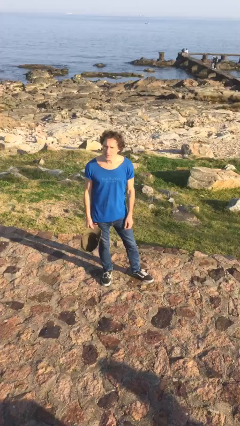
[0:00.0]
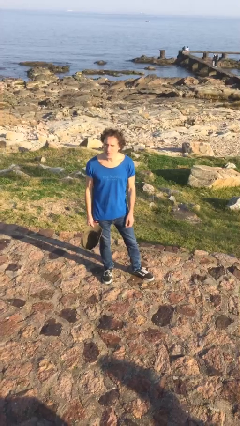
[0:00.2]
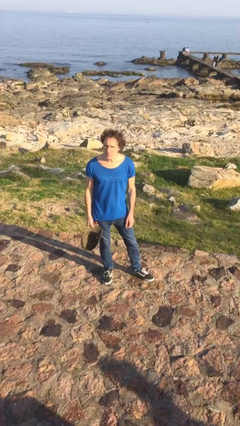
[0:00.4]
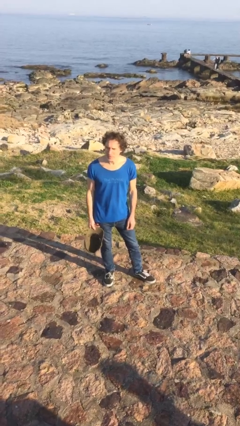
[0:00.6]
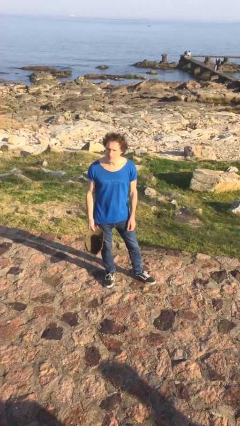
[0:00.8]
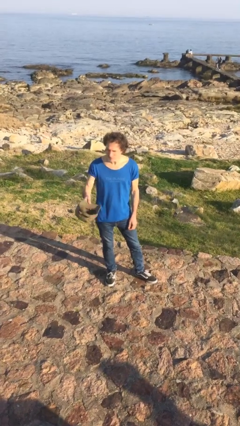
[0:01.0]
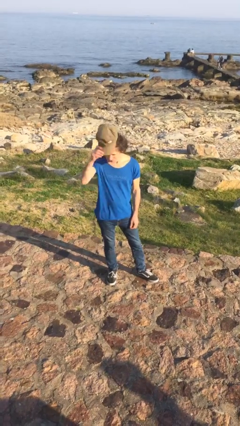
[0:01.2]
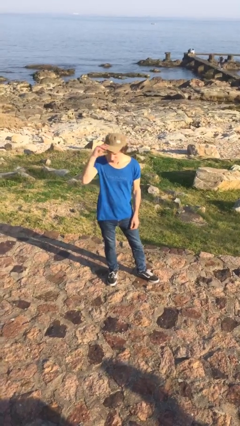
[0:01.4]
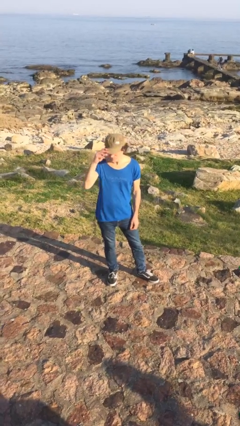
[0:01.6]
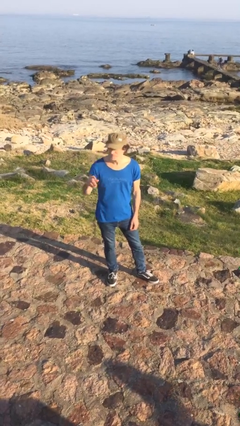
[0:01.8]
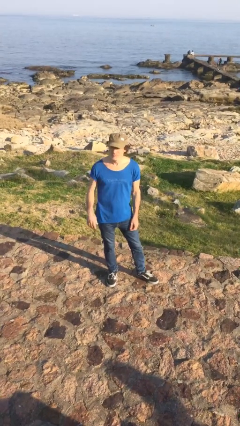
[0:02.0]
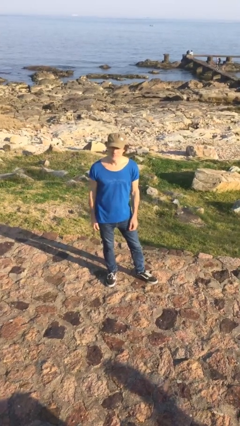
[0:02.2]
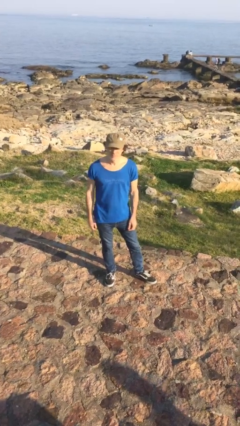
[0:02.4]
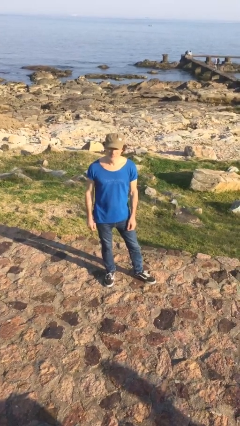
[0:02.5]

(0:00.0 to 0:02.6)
person puts on hat

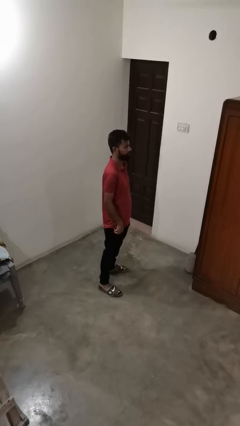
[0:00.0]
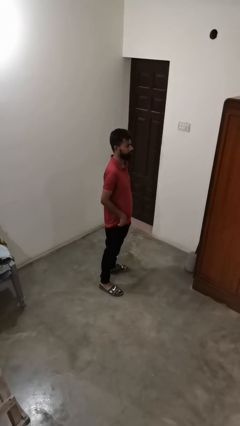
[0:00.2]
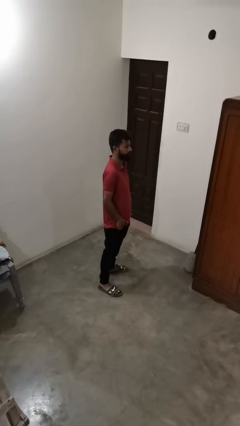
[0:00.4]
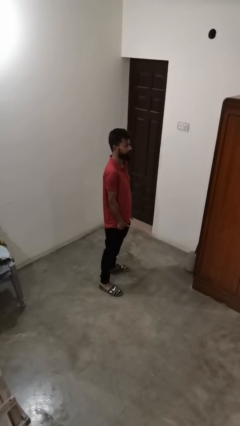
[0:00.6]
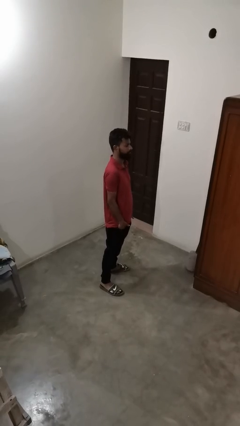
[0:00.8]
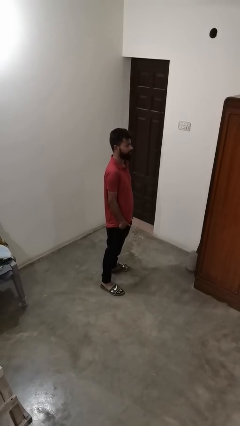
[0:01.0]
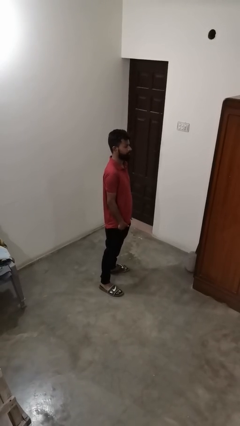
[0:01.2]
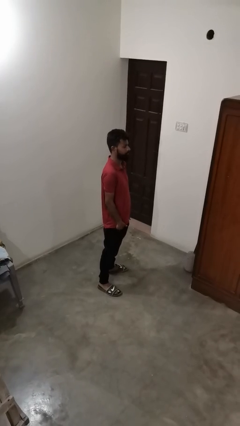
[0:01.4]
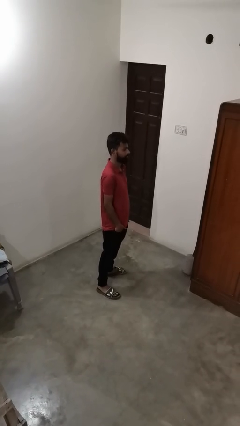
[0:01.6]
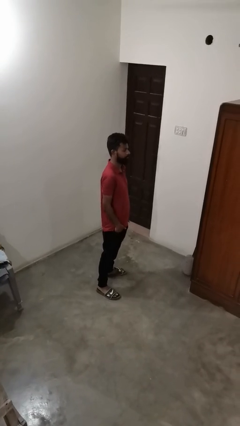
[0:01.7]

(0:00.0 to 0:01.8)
person puts hands in back pockets

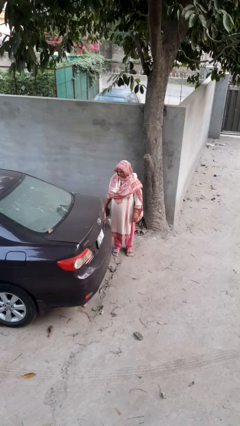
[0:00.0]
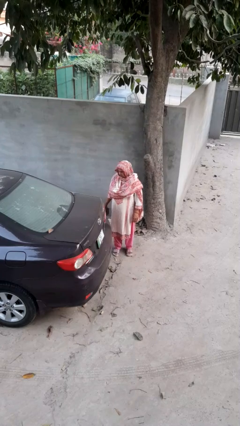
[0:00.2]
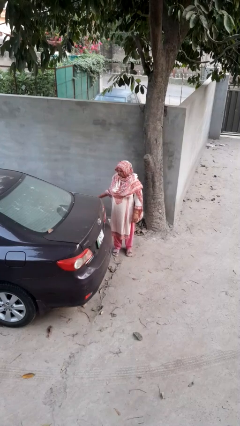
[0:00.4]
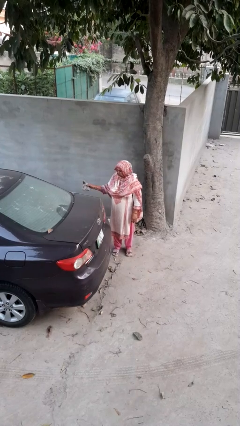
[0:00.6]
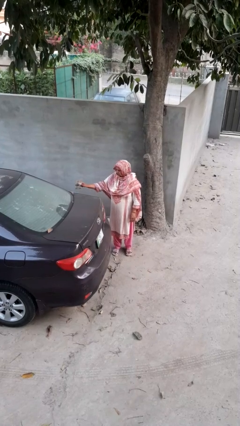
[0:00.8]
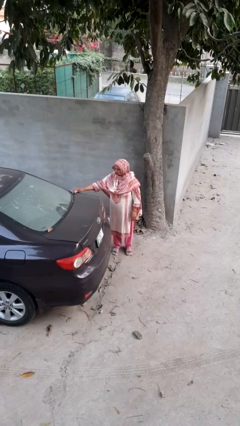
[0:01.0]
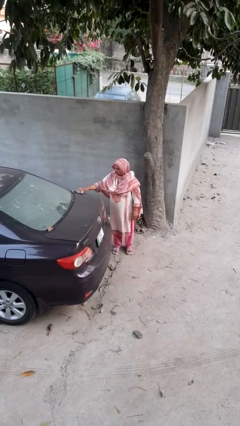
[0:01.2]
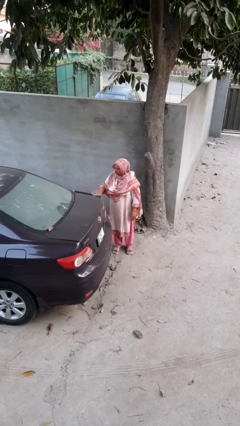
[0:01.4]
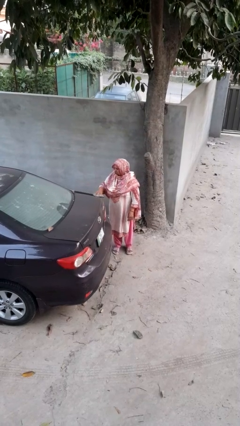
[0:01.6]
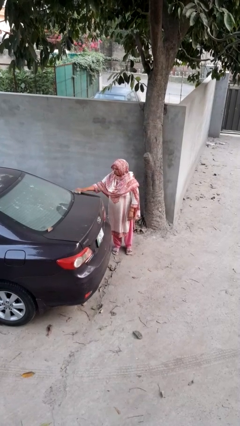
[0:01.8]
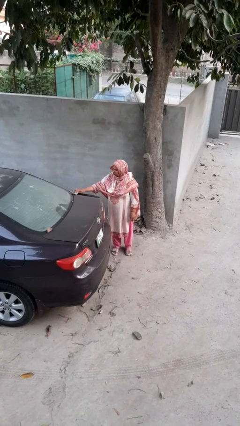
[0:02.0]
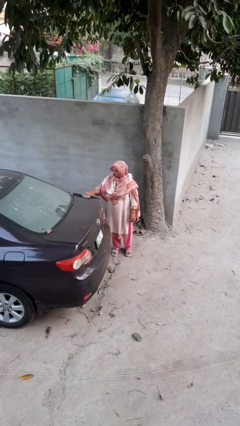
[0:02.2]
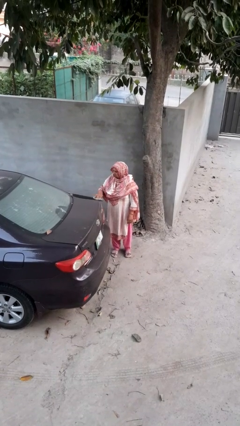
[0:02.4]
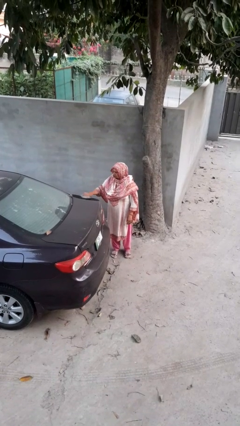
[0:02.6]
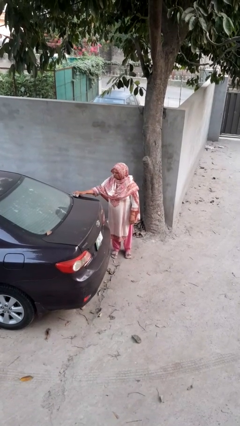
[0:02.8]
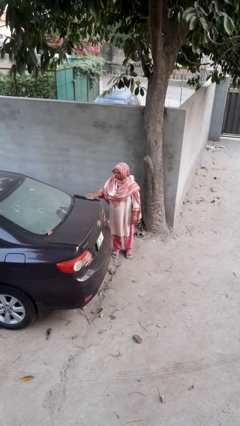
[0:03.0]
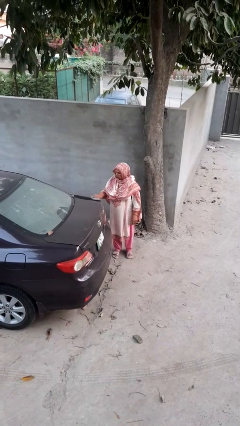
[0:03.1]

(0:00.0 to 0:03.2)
person polishes car with rag

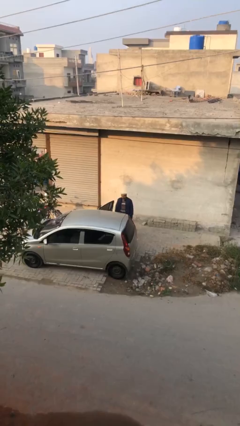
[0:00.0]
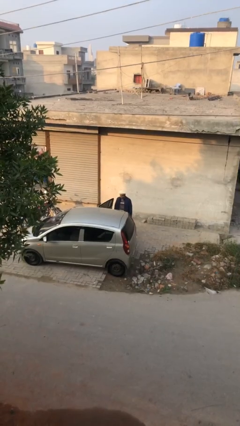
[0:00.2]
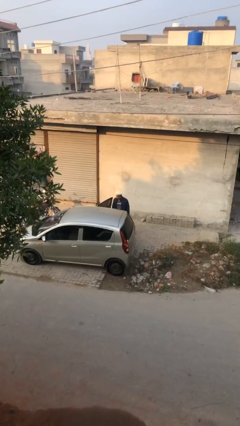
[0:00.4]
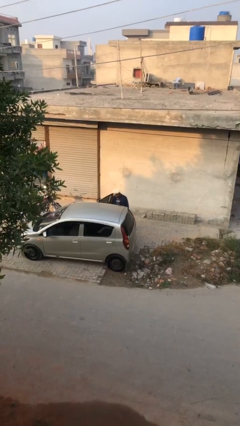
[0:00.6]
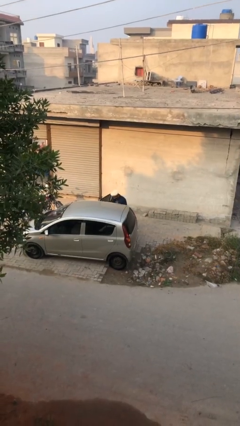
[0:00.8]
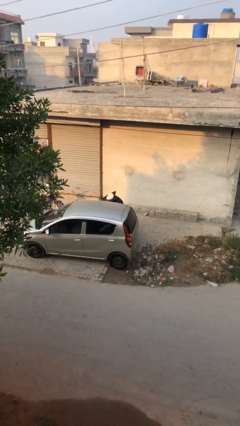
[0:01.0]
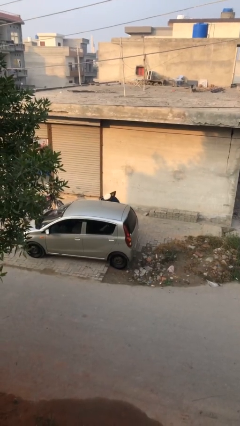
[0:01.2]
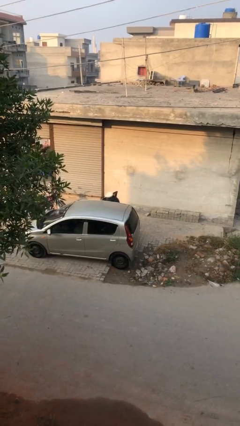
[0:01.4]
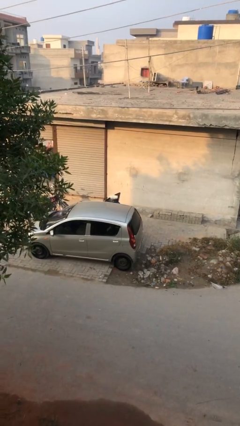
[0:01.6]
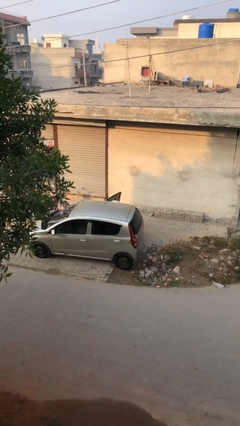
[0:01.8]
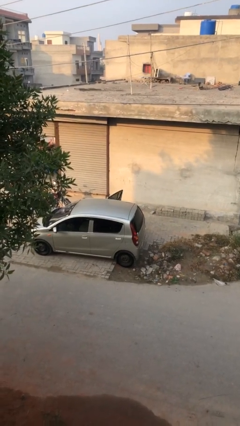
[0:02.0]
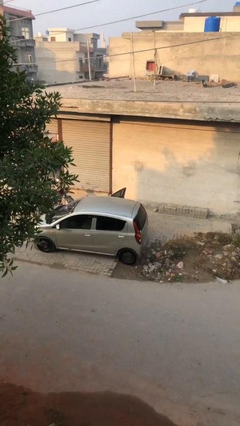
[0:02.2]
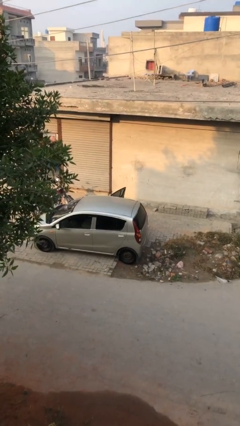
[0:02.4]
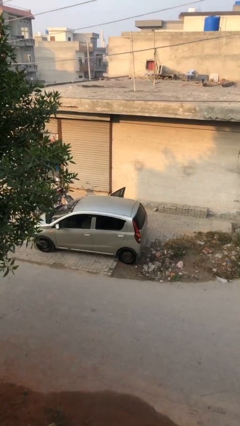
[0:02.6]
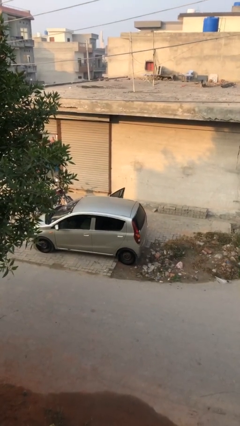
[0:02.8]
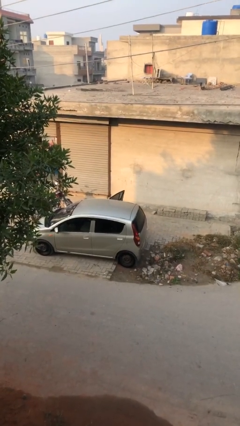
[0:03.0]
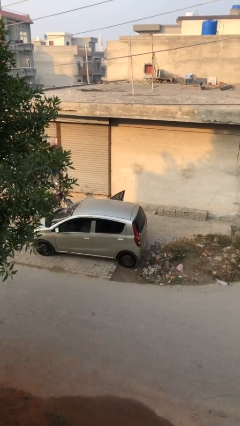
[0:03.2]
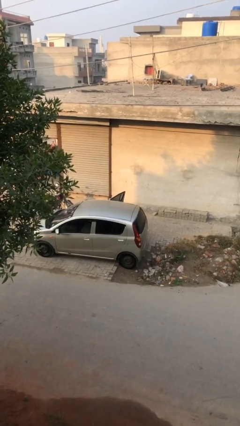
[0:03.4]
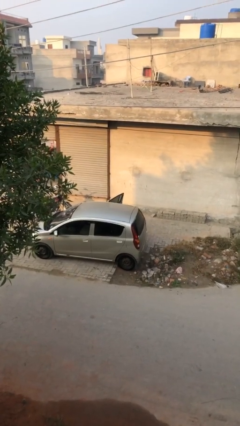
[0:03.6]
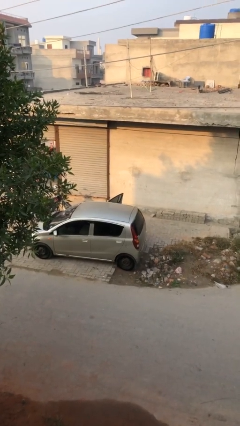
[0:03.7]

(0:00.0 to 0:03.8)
person enters car

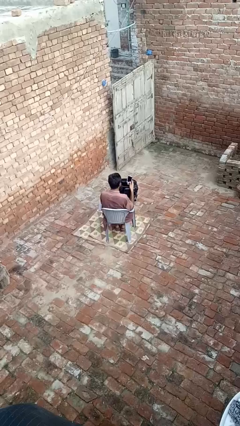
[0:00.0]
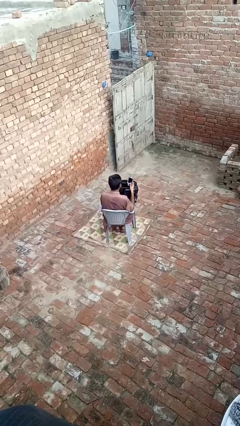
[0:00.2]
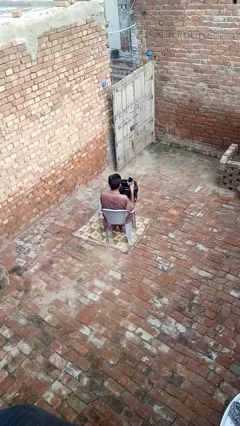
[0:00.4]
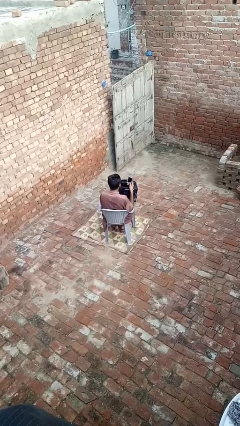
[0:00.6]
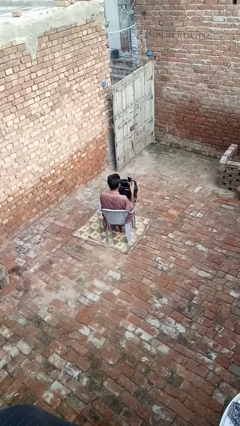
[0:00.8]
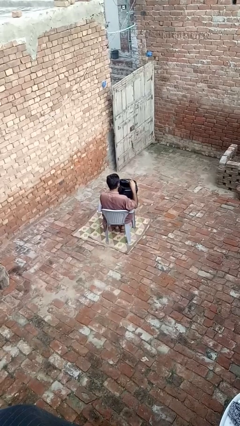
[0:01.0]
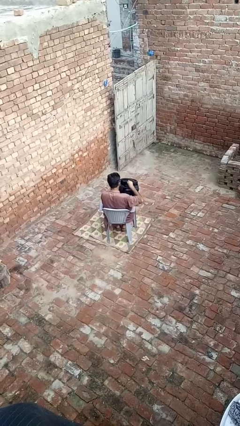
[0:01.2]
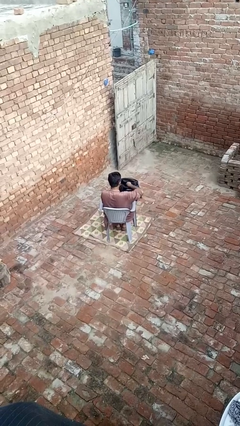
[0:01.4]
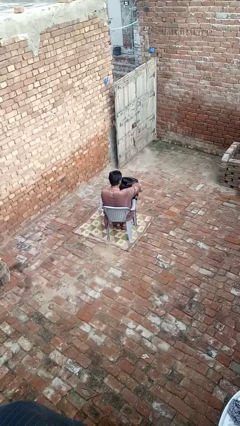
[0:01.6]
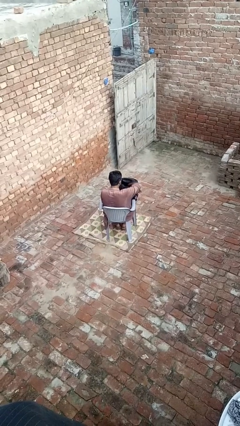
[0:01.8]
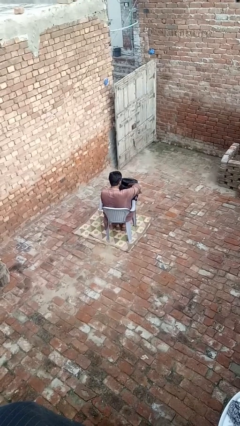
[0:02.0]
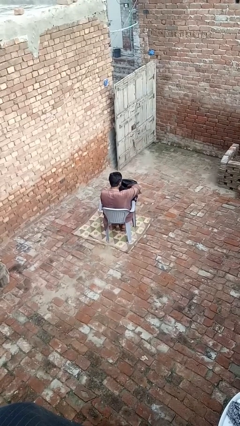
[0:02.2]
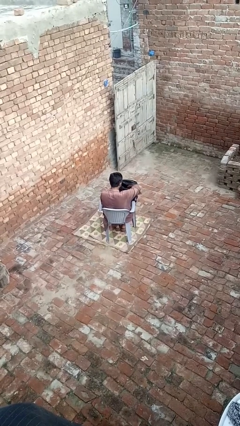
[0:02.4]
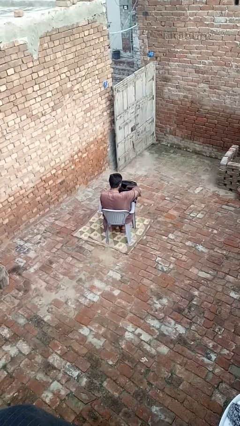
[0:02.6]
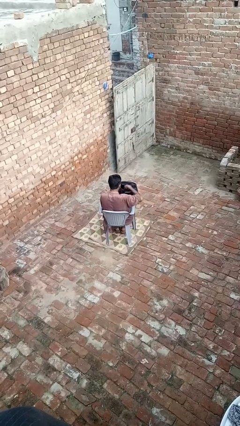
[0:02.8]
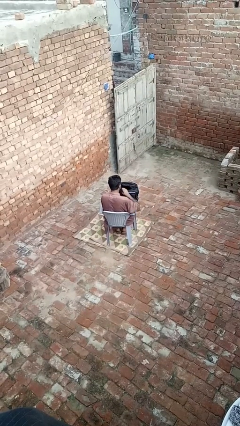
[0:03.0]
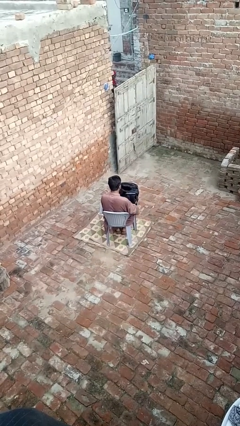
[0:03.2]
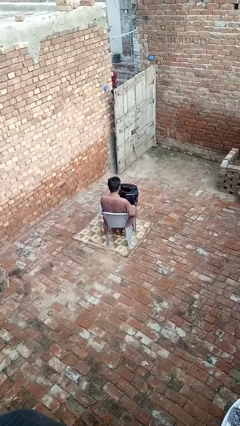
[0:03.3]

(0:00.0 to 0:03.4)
person puts object into backpack

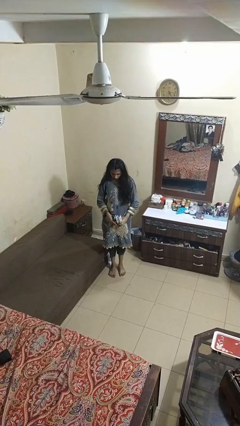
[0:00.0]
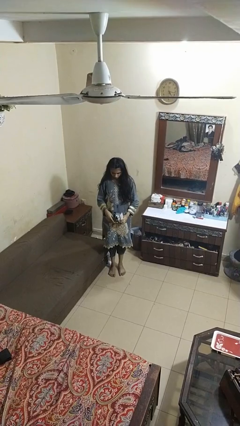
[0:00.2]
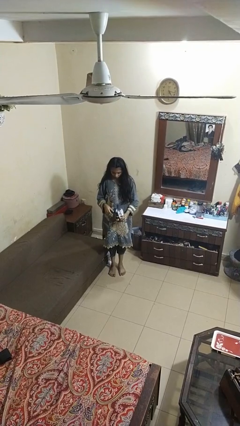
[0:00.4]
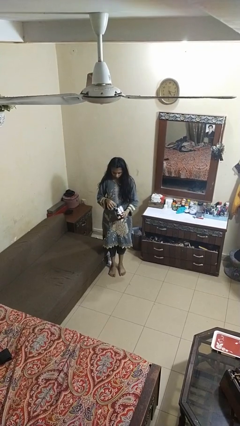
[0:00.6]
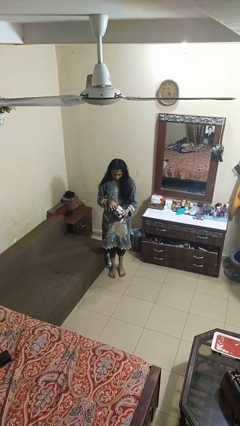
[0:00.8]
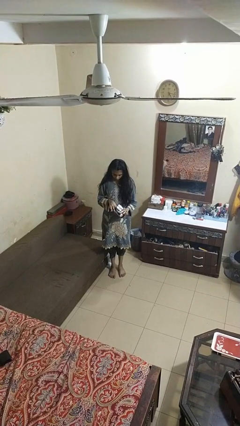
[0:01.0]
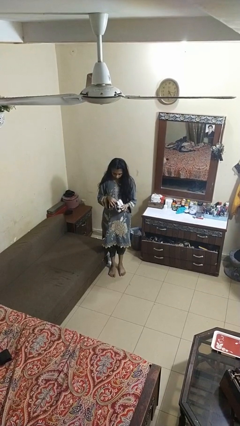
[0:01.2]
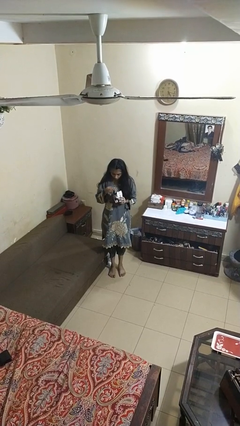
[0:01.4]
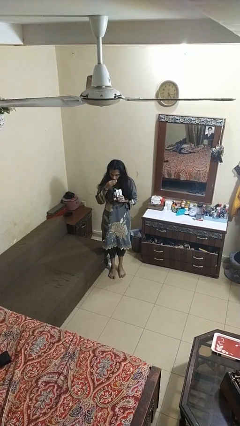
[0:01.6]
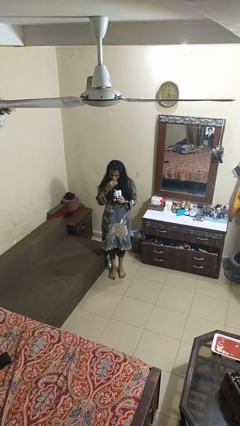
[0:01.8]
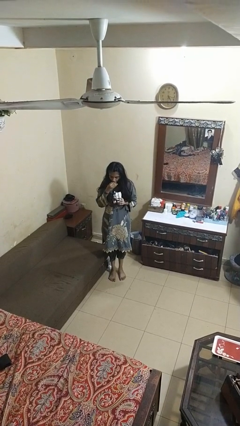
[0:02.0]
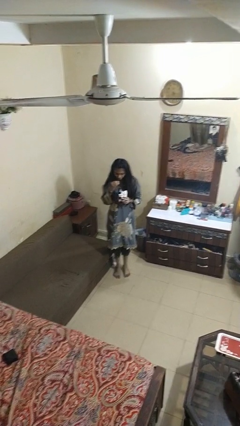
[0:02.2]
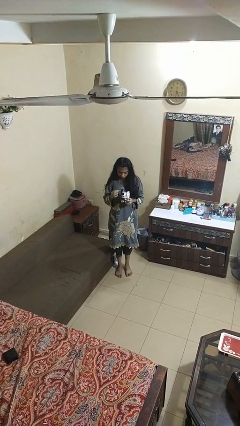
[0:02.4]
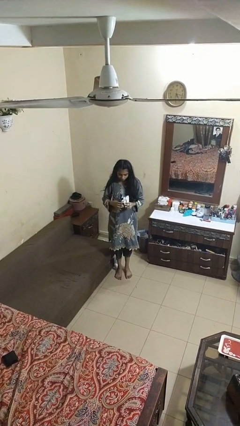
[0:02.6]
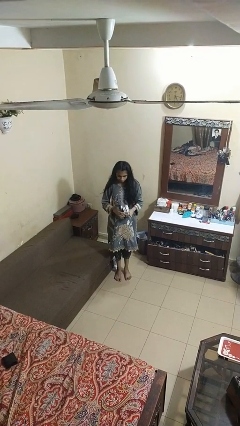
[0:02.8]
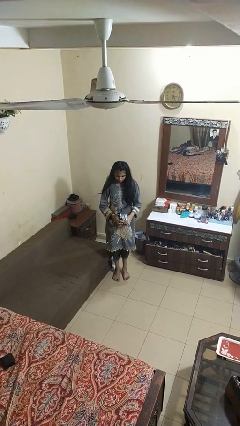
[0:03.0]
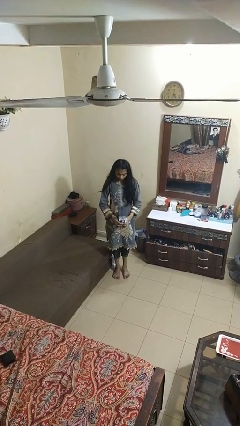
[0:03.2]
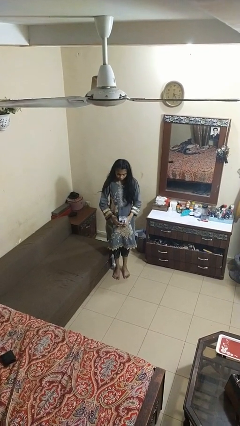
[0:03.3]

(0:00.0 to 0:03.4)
person eats snack from bag
